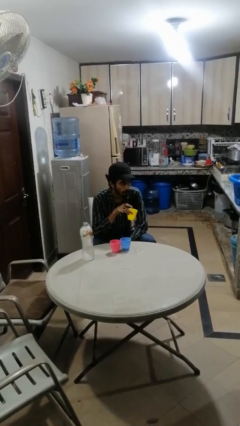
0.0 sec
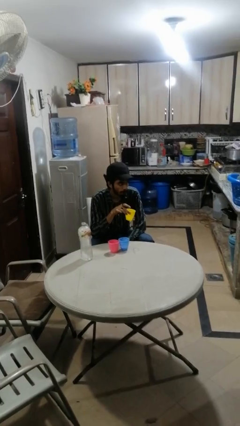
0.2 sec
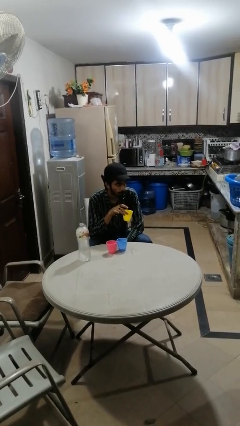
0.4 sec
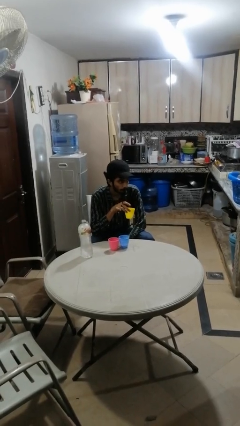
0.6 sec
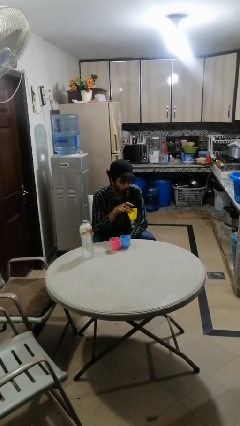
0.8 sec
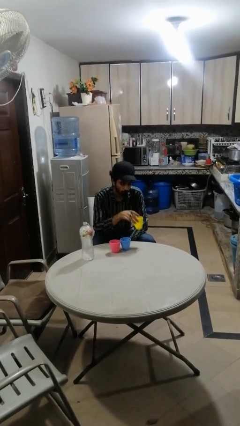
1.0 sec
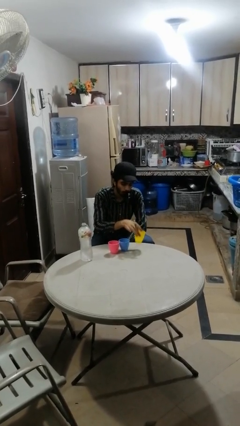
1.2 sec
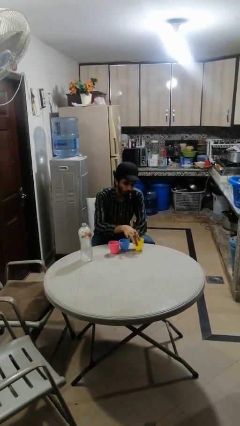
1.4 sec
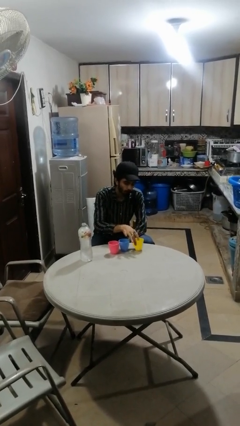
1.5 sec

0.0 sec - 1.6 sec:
person puts down object on table

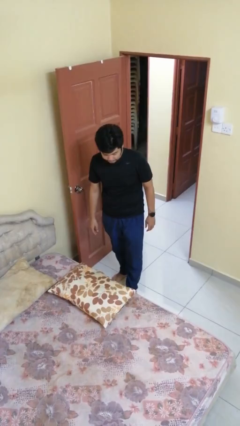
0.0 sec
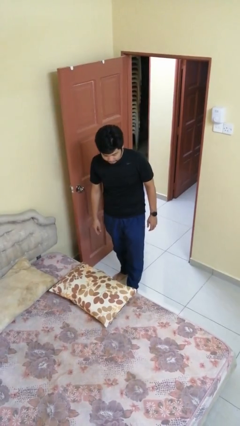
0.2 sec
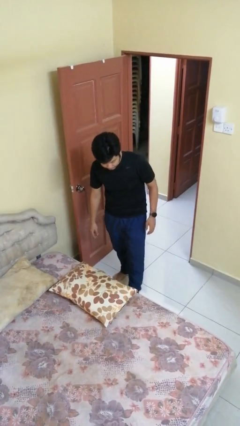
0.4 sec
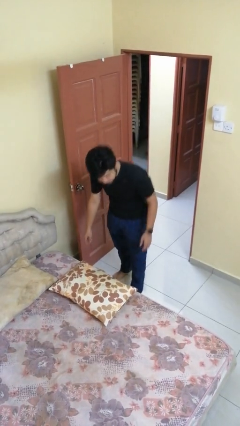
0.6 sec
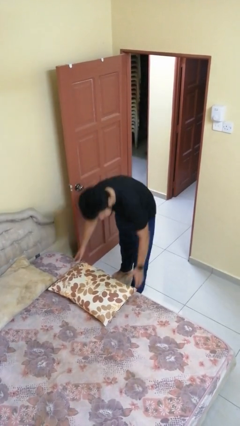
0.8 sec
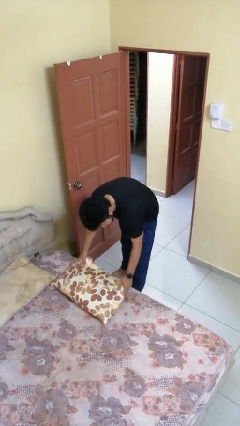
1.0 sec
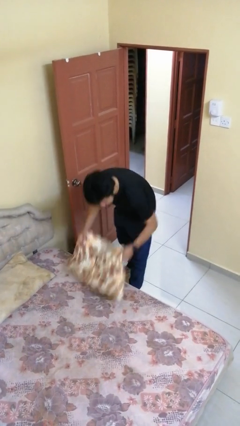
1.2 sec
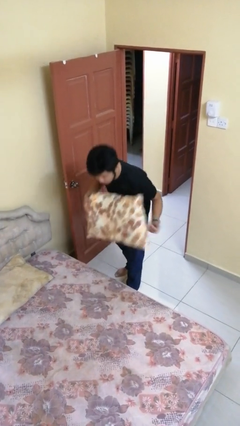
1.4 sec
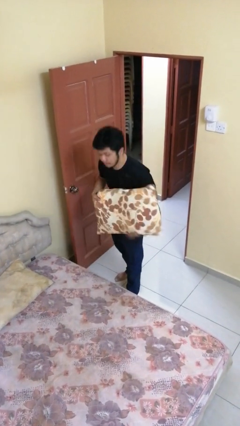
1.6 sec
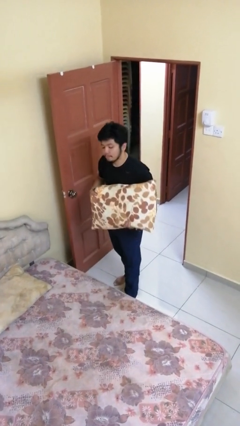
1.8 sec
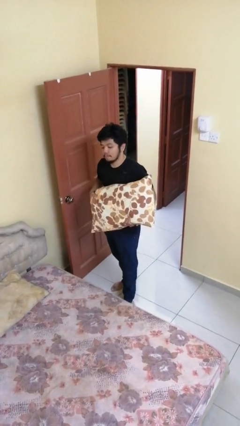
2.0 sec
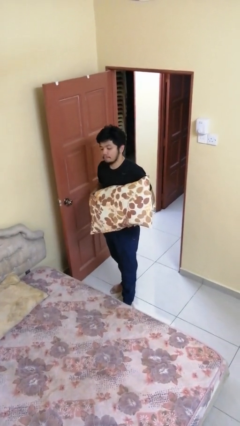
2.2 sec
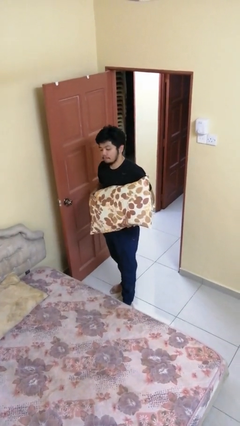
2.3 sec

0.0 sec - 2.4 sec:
person picks up object from bed

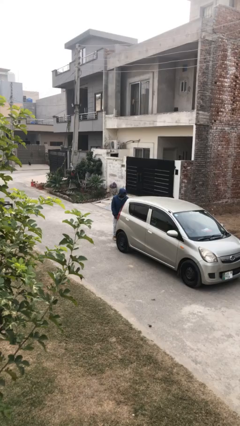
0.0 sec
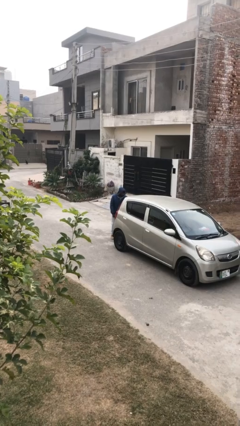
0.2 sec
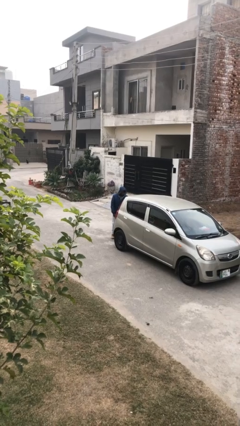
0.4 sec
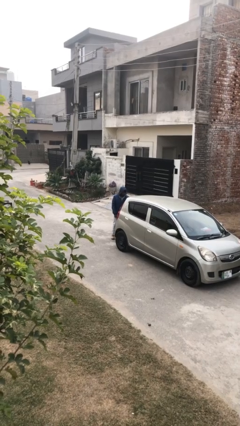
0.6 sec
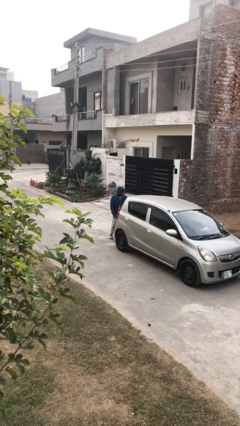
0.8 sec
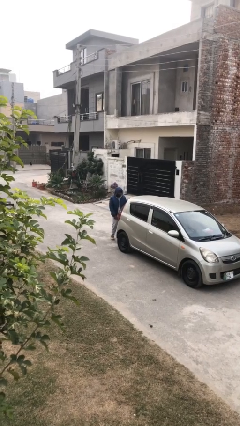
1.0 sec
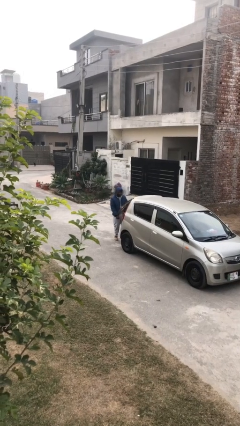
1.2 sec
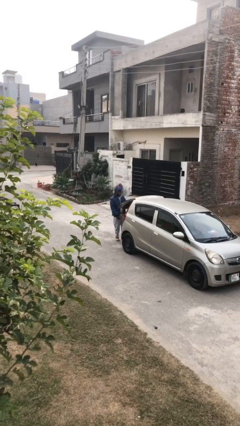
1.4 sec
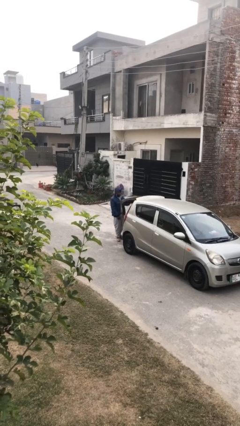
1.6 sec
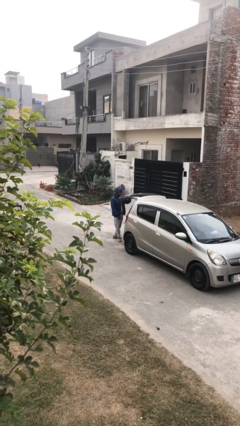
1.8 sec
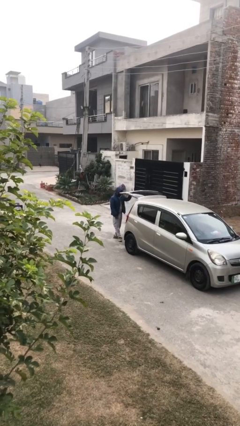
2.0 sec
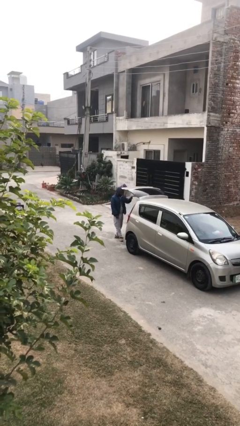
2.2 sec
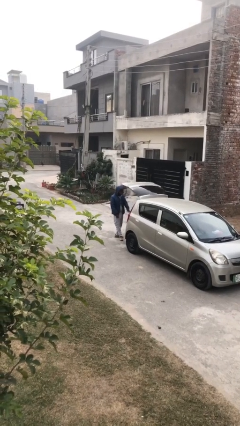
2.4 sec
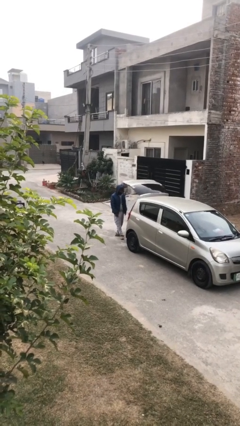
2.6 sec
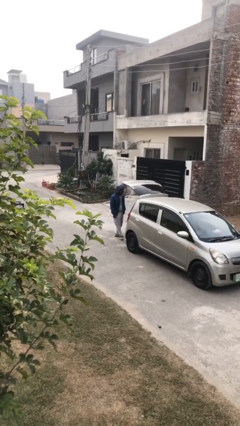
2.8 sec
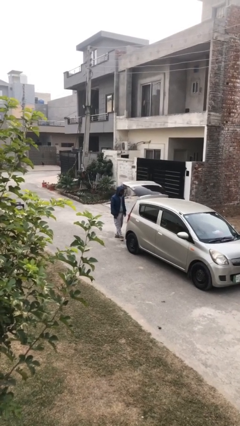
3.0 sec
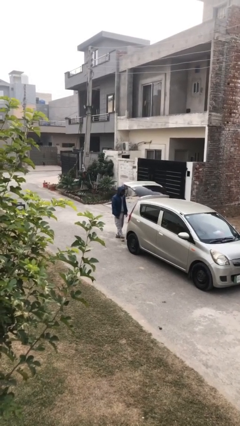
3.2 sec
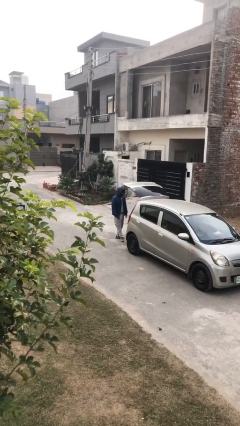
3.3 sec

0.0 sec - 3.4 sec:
person opens car trunk

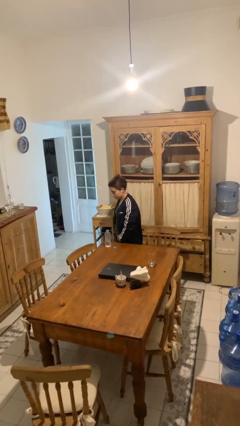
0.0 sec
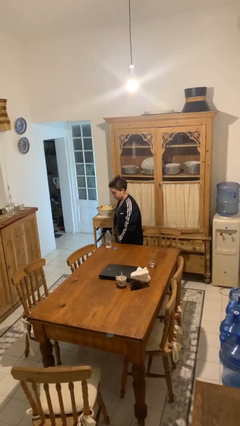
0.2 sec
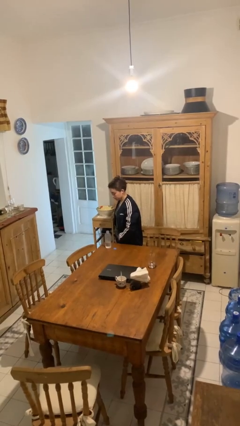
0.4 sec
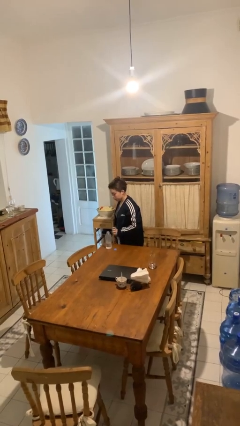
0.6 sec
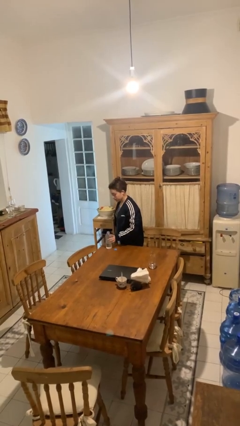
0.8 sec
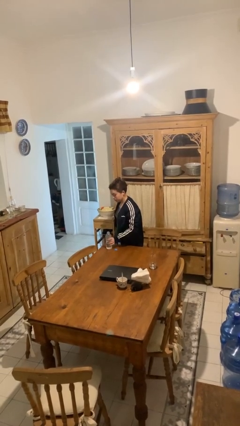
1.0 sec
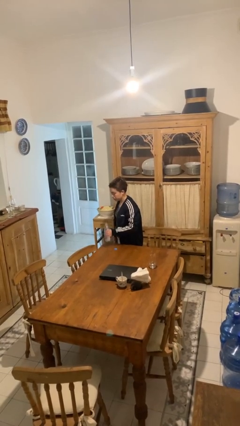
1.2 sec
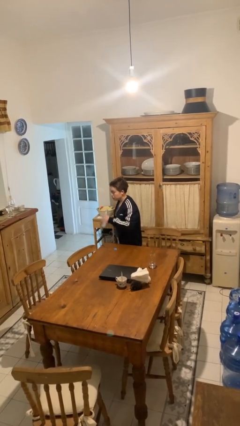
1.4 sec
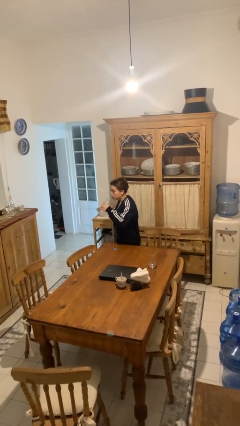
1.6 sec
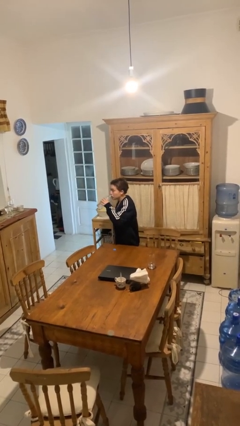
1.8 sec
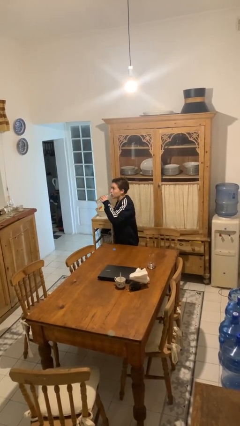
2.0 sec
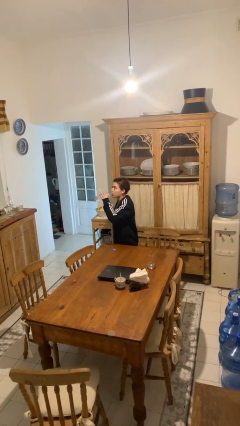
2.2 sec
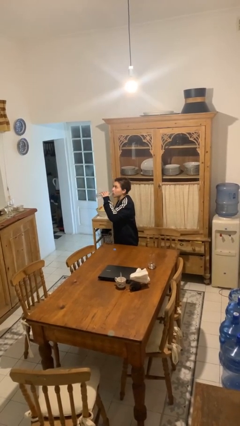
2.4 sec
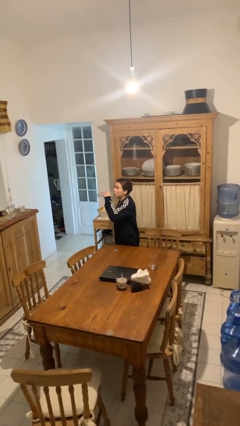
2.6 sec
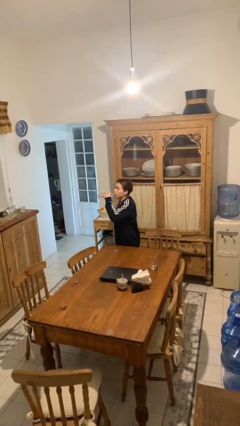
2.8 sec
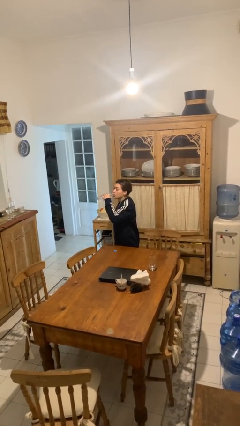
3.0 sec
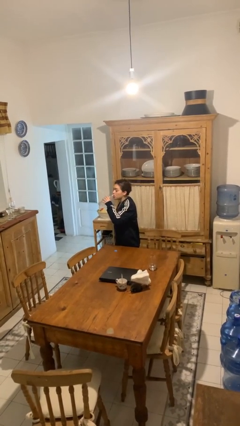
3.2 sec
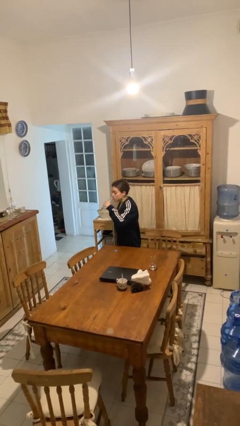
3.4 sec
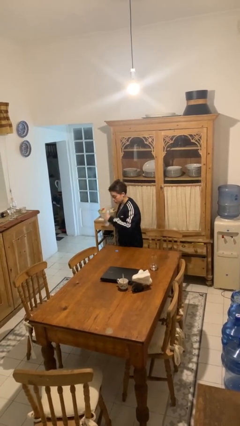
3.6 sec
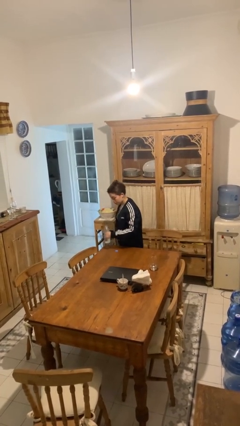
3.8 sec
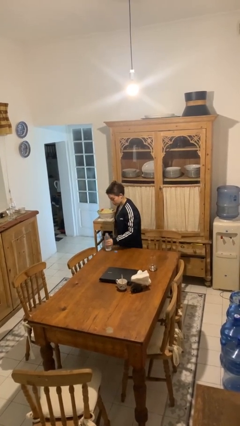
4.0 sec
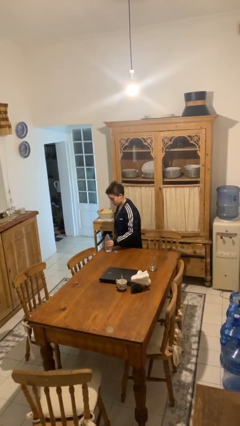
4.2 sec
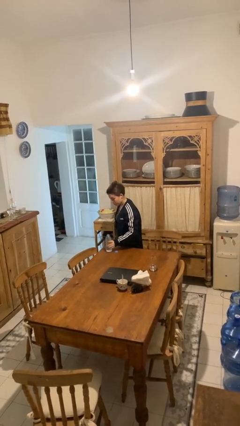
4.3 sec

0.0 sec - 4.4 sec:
person drinks from bottle

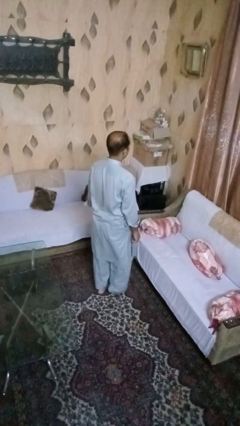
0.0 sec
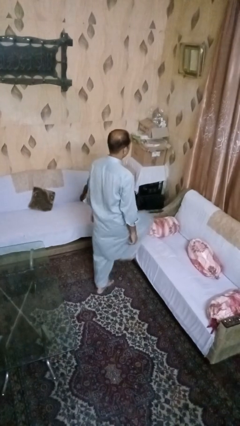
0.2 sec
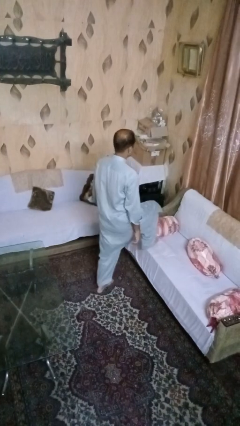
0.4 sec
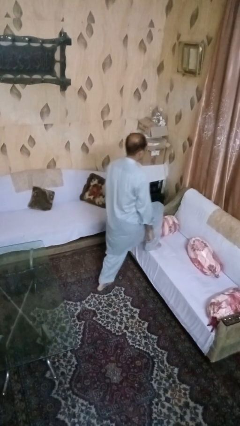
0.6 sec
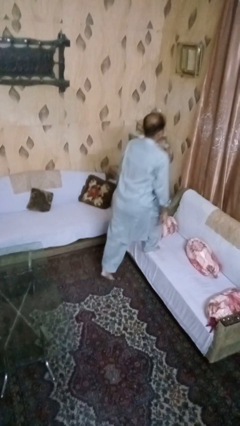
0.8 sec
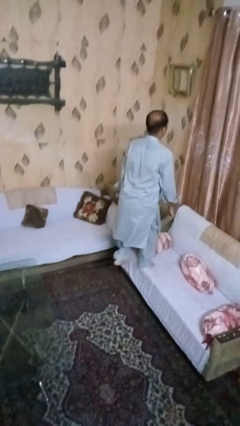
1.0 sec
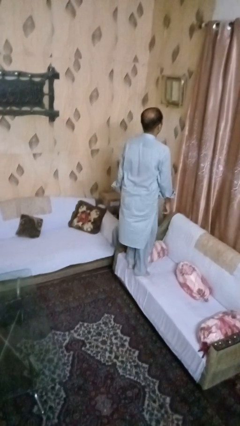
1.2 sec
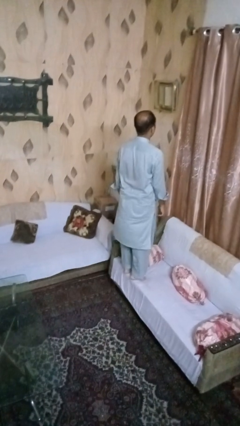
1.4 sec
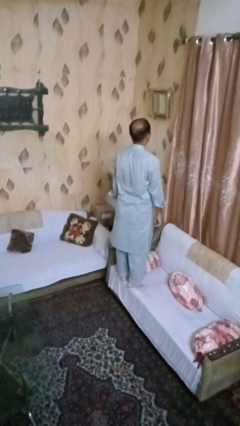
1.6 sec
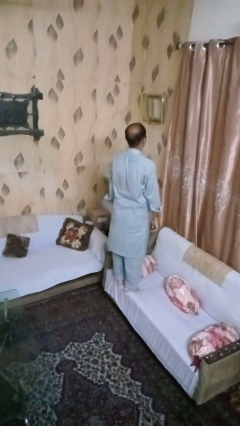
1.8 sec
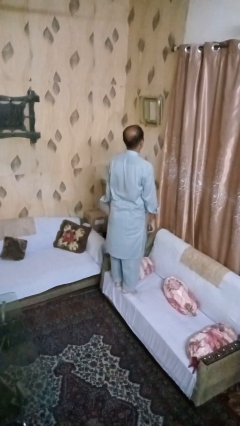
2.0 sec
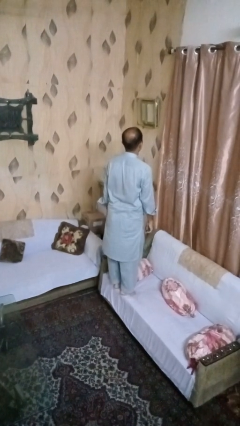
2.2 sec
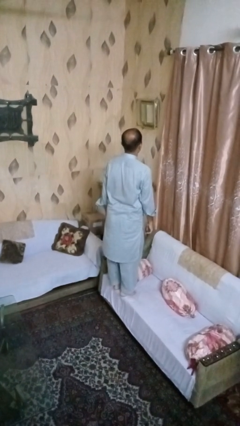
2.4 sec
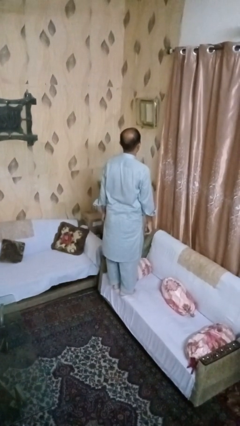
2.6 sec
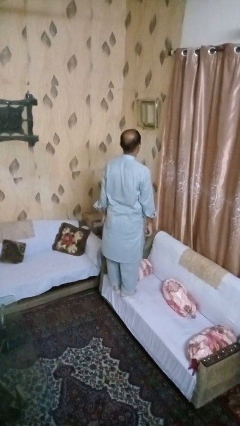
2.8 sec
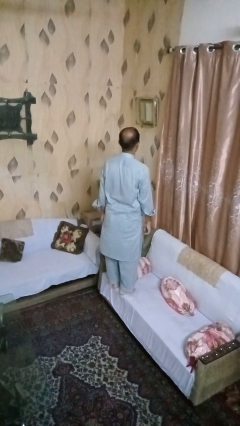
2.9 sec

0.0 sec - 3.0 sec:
person climbs on couch

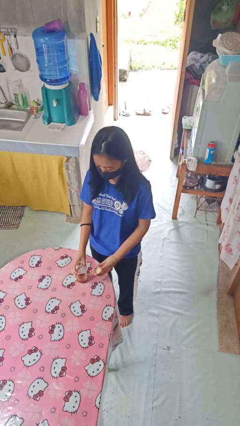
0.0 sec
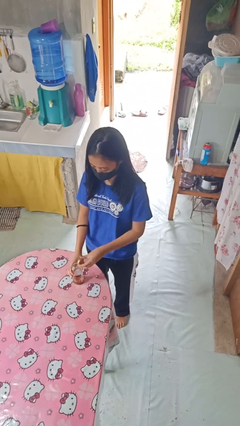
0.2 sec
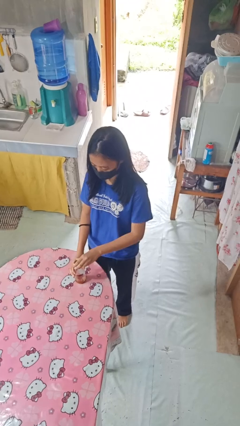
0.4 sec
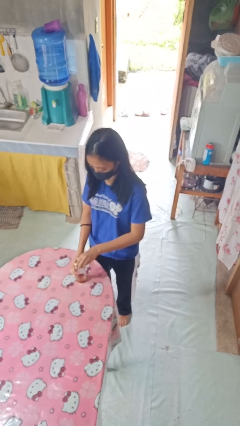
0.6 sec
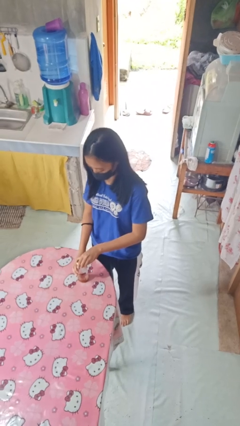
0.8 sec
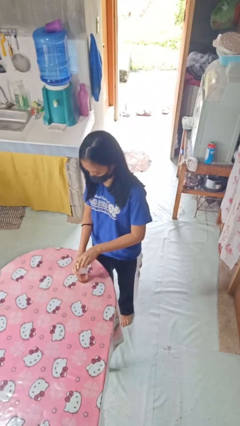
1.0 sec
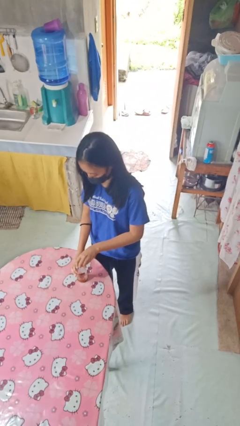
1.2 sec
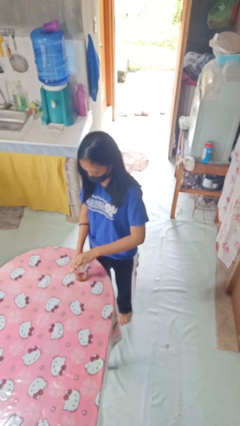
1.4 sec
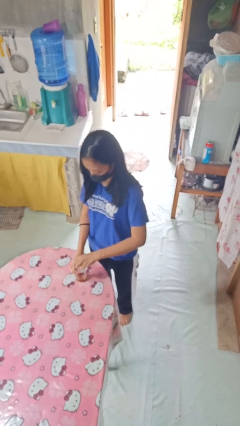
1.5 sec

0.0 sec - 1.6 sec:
person closes jar

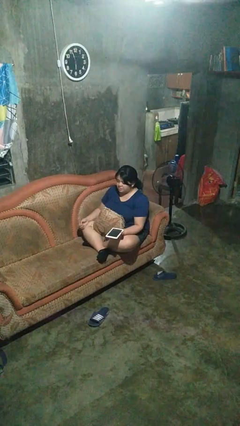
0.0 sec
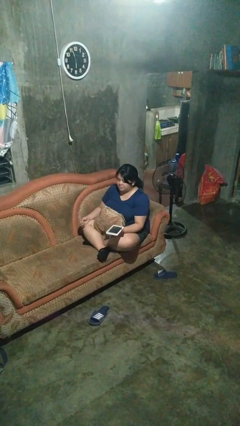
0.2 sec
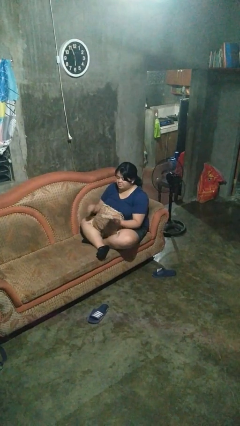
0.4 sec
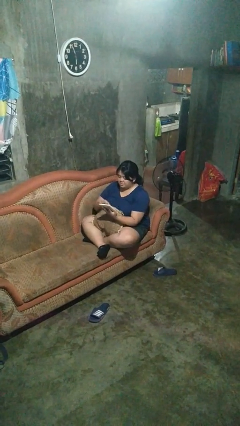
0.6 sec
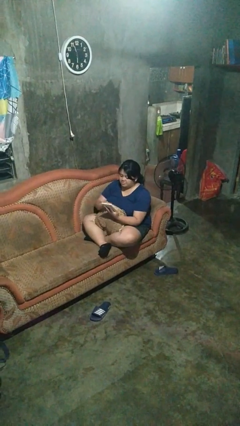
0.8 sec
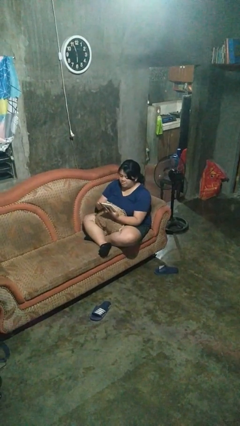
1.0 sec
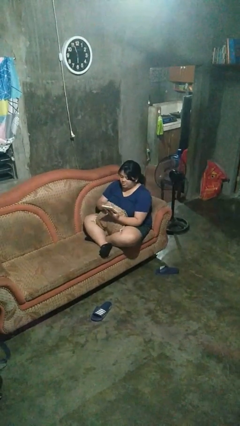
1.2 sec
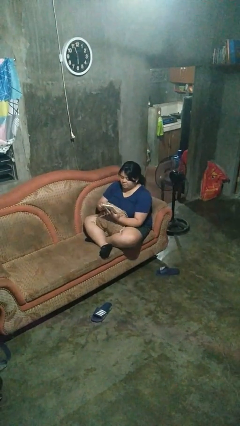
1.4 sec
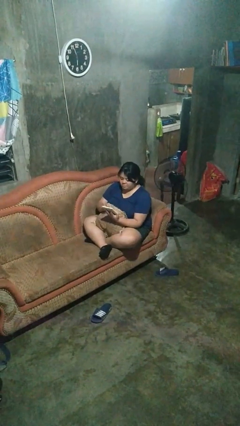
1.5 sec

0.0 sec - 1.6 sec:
person interacts with tablet
